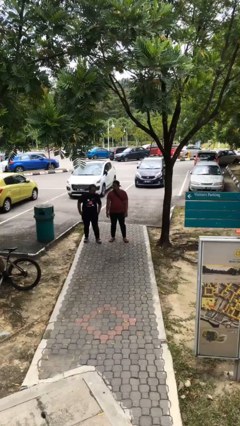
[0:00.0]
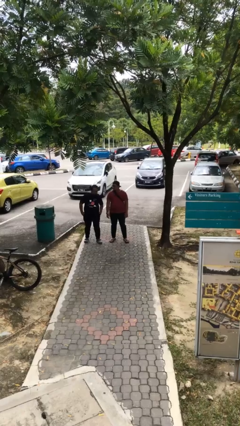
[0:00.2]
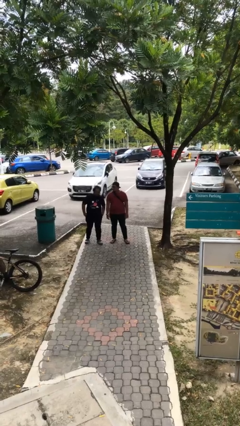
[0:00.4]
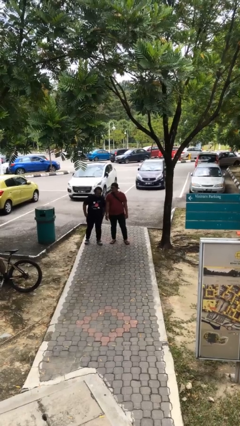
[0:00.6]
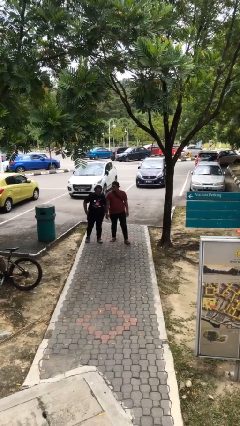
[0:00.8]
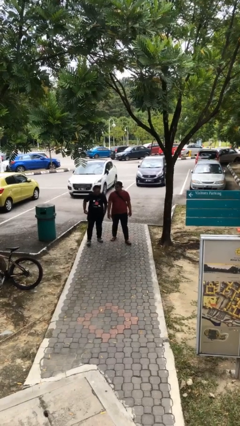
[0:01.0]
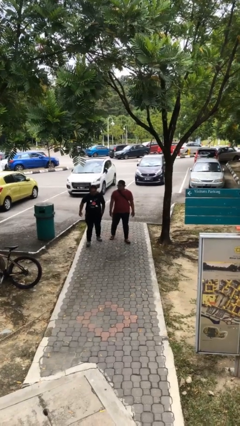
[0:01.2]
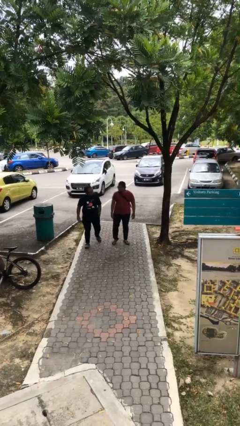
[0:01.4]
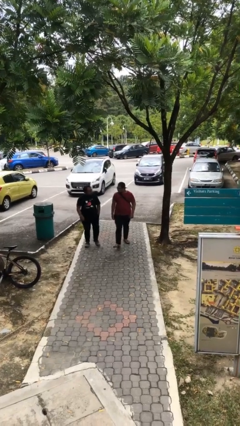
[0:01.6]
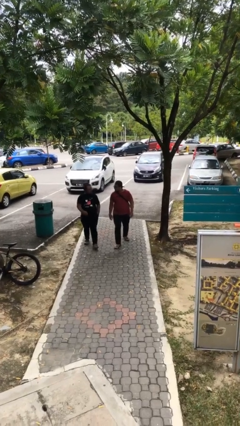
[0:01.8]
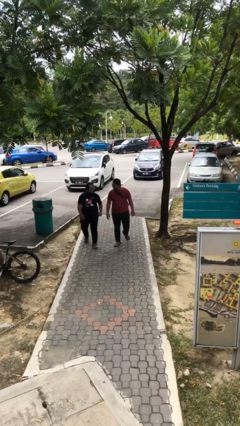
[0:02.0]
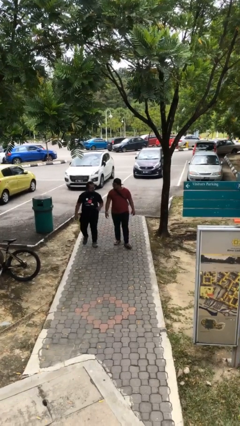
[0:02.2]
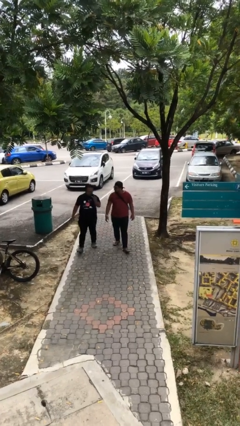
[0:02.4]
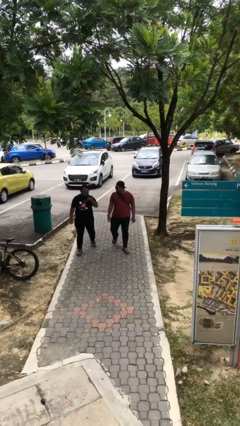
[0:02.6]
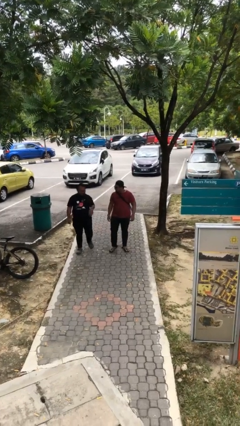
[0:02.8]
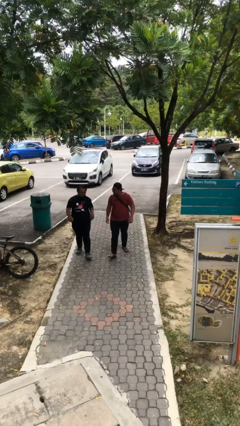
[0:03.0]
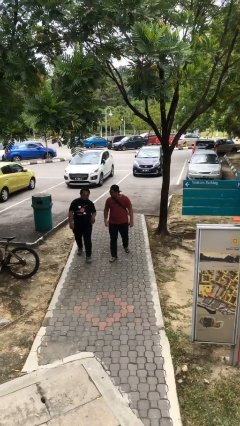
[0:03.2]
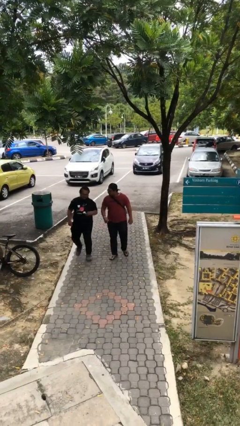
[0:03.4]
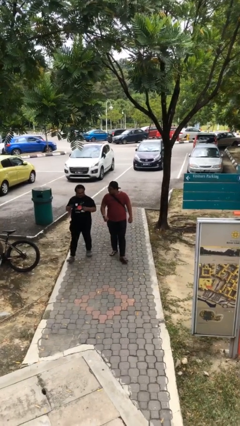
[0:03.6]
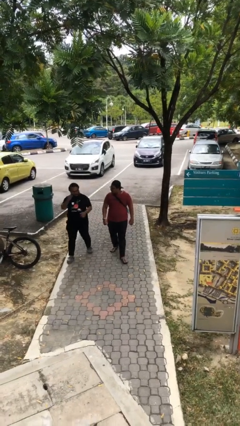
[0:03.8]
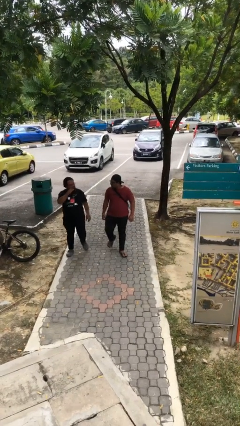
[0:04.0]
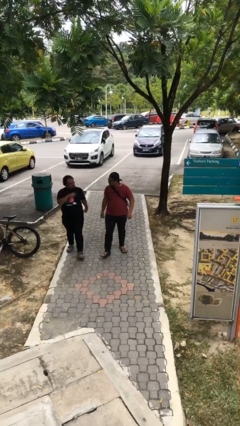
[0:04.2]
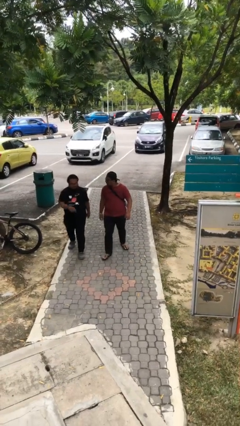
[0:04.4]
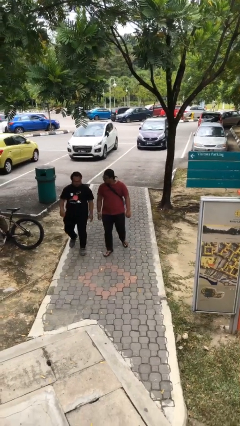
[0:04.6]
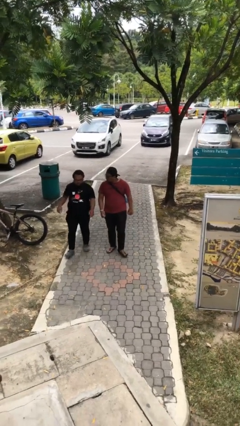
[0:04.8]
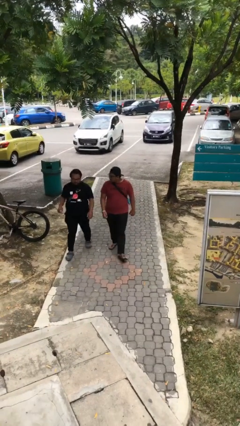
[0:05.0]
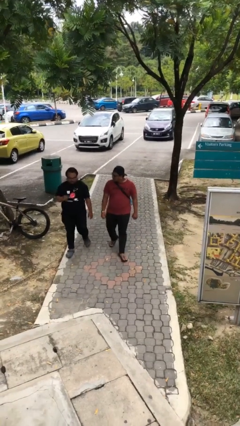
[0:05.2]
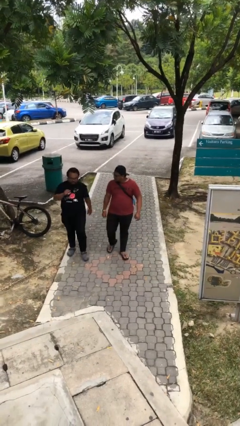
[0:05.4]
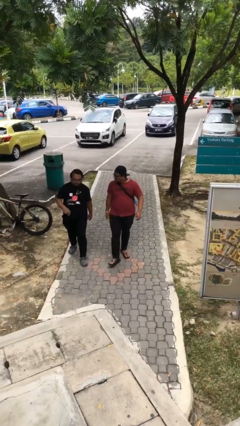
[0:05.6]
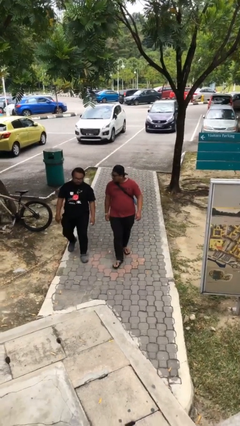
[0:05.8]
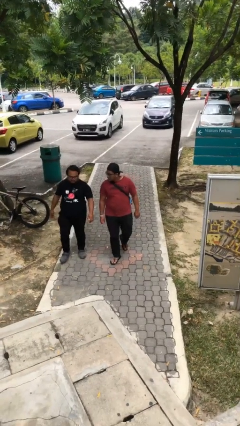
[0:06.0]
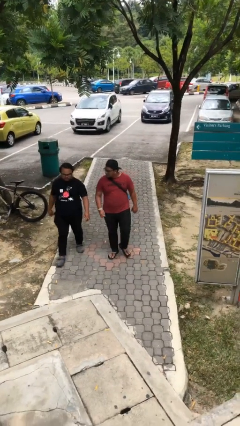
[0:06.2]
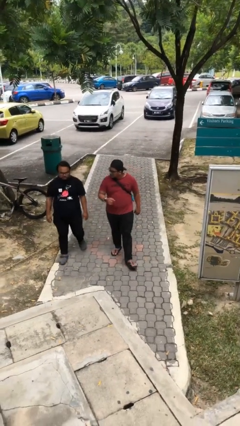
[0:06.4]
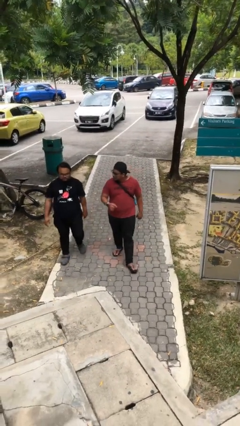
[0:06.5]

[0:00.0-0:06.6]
person talks to person

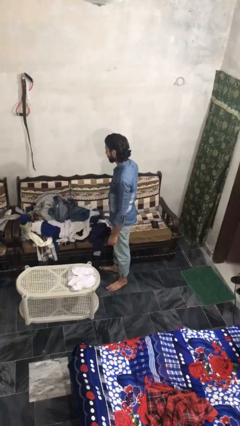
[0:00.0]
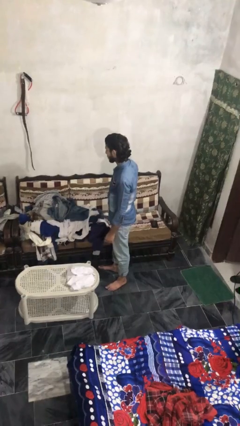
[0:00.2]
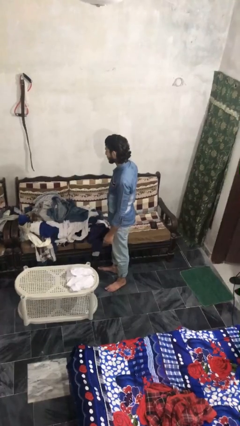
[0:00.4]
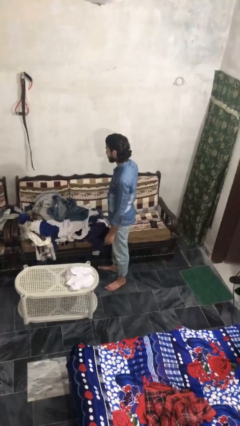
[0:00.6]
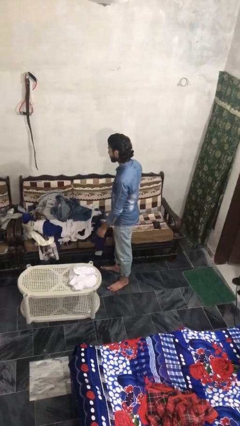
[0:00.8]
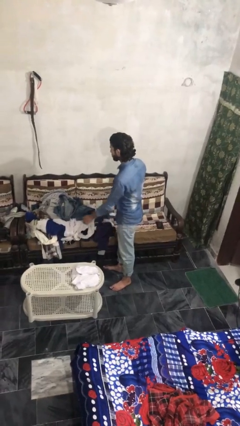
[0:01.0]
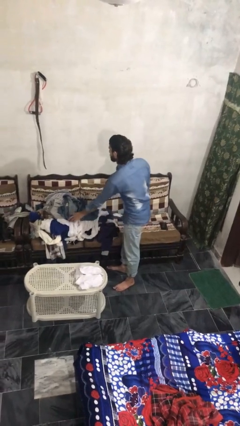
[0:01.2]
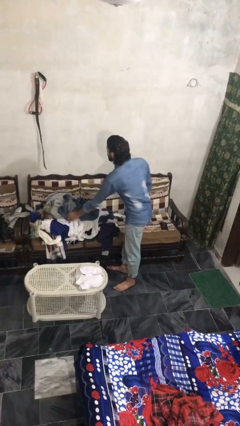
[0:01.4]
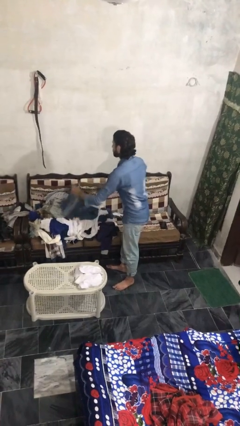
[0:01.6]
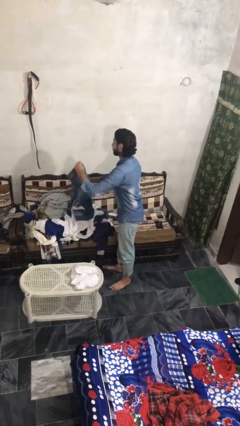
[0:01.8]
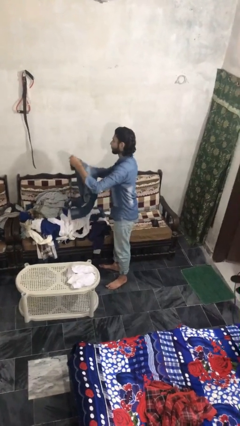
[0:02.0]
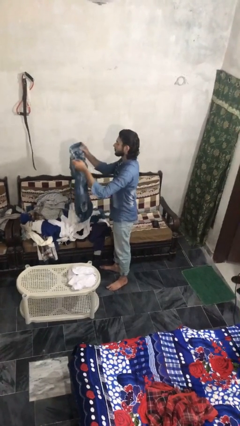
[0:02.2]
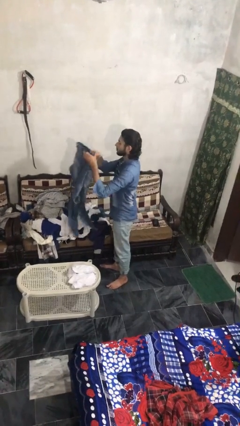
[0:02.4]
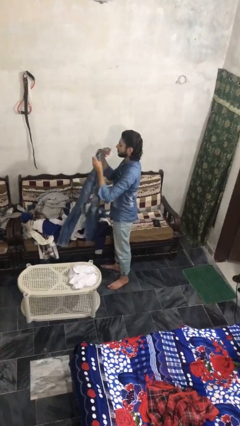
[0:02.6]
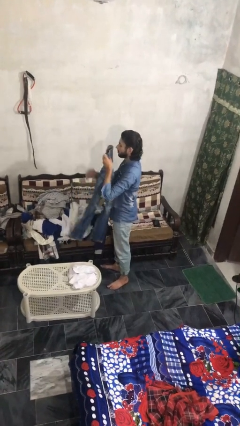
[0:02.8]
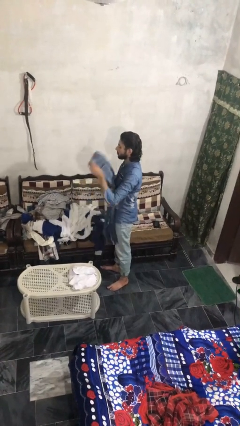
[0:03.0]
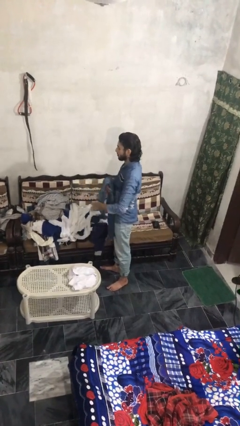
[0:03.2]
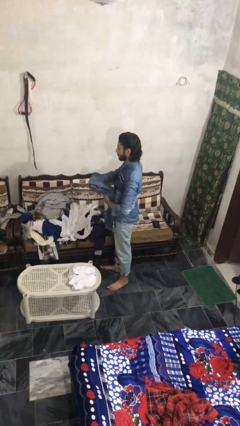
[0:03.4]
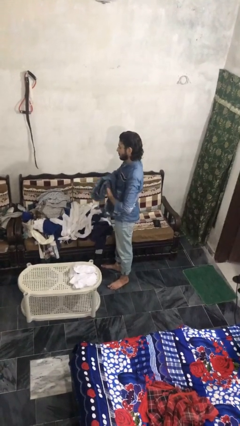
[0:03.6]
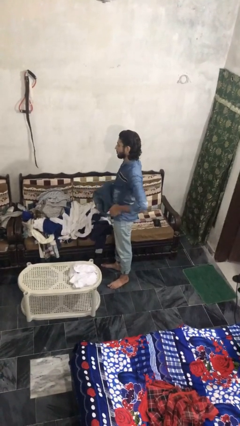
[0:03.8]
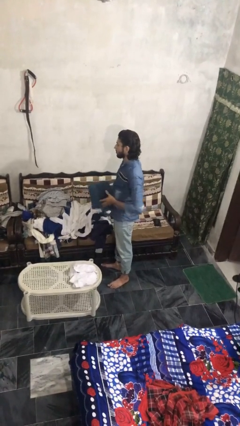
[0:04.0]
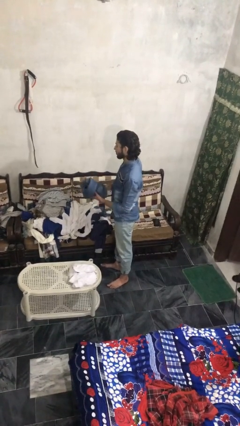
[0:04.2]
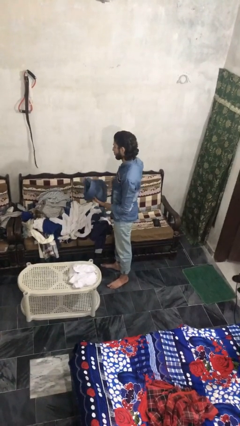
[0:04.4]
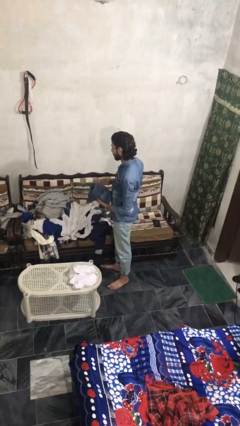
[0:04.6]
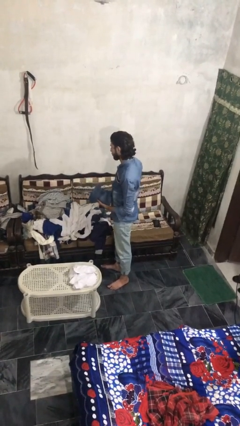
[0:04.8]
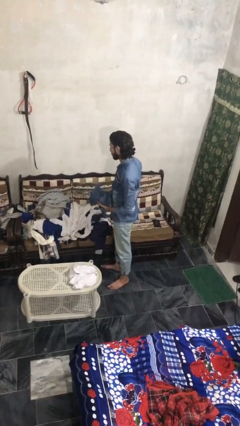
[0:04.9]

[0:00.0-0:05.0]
person folds pants

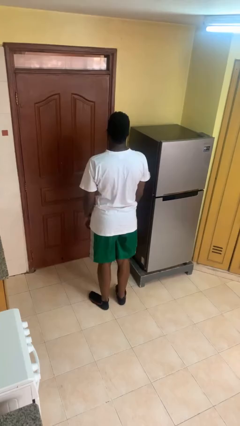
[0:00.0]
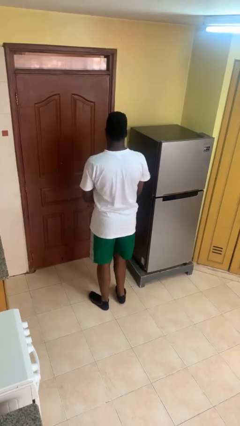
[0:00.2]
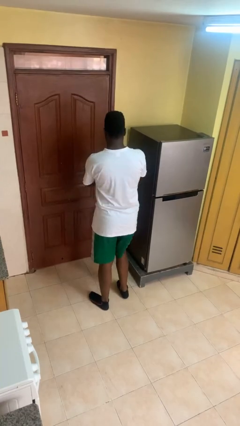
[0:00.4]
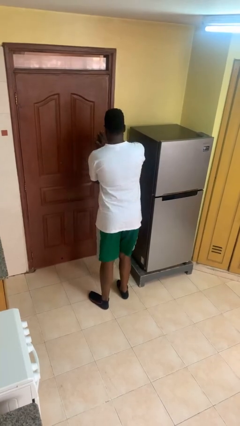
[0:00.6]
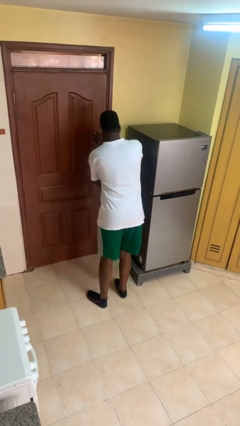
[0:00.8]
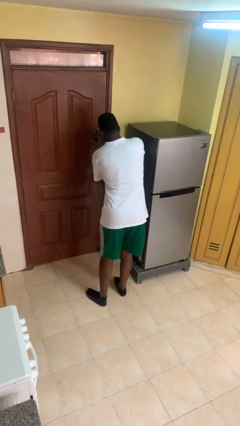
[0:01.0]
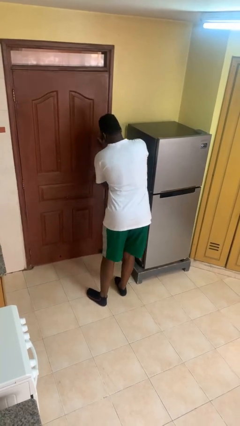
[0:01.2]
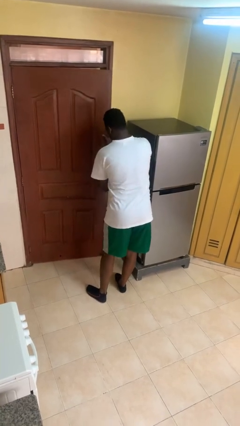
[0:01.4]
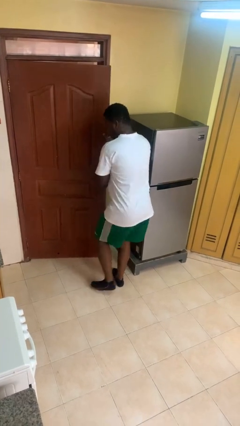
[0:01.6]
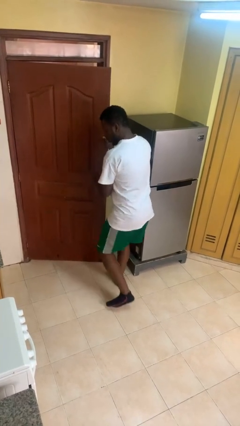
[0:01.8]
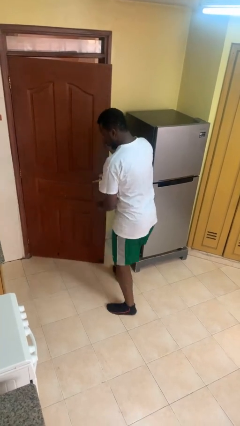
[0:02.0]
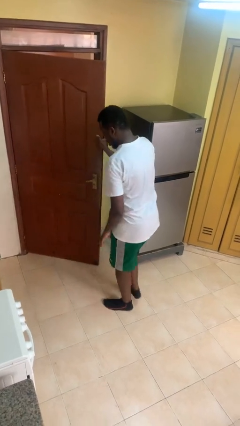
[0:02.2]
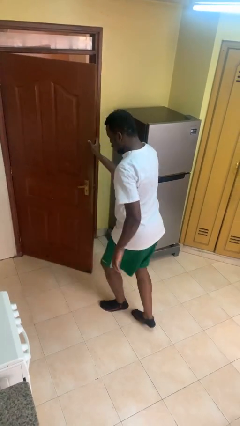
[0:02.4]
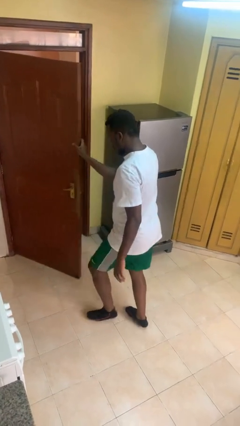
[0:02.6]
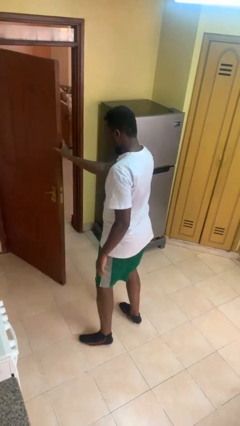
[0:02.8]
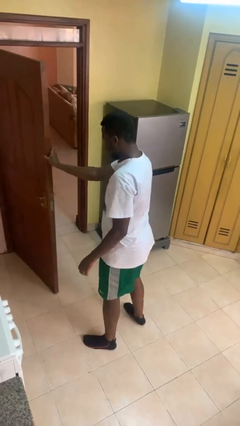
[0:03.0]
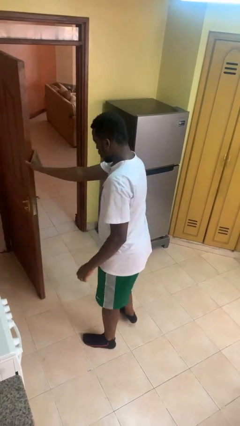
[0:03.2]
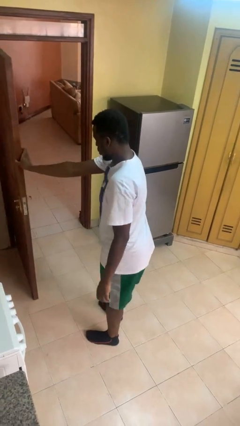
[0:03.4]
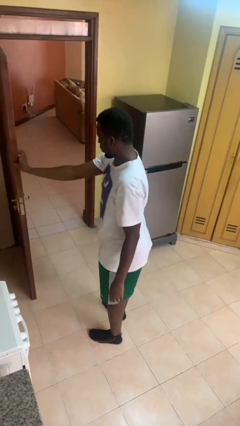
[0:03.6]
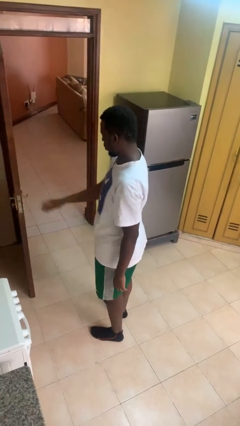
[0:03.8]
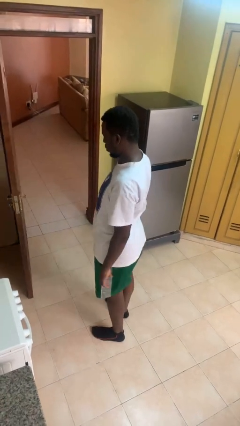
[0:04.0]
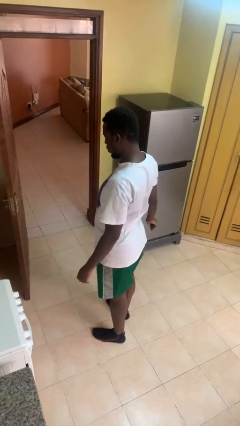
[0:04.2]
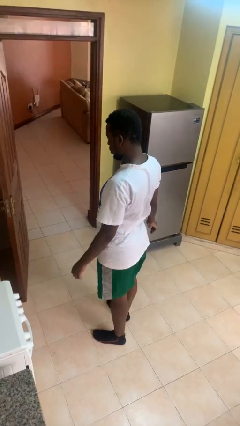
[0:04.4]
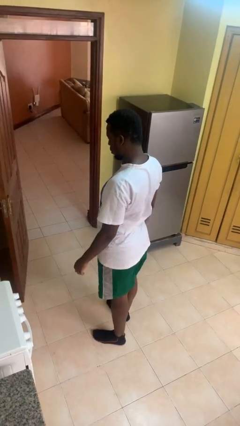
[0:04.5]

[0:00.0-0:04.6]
person opens facility door

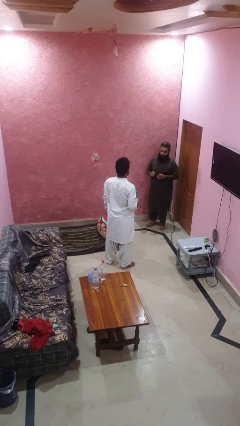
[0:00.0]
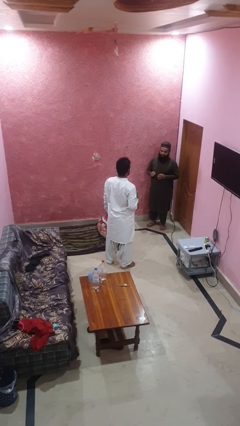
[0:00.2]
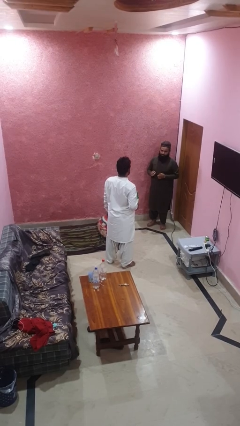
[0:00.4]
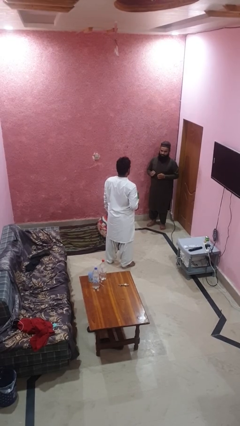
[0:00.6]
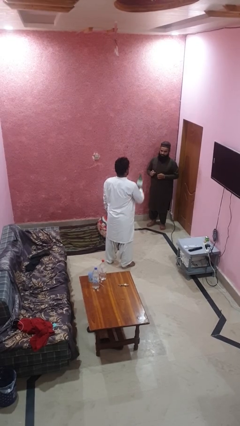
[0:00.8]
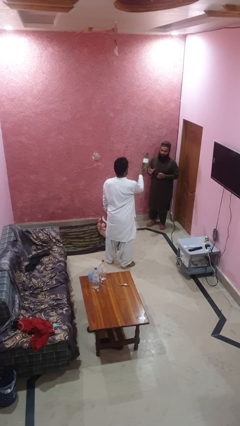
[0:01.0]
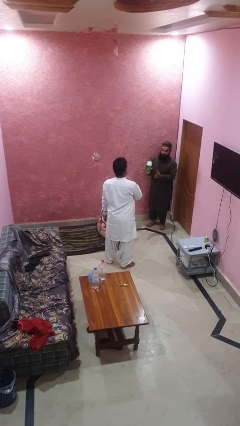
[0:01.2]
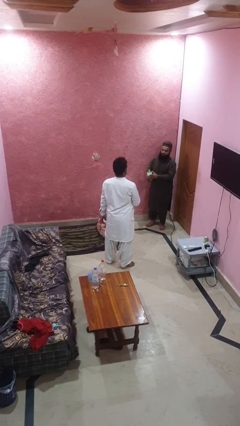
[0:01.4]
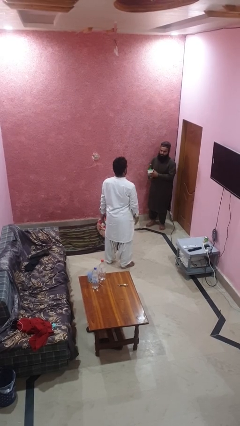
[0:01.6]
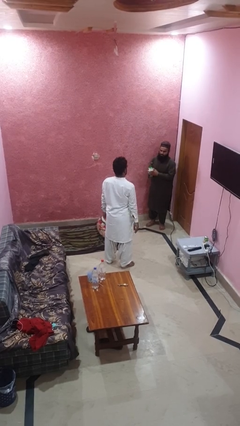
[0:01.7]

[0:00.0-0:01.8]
person throws object to person
